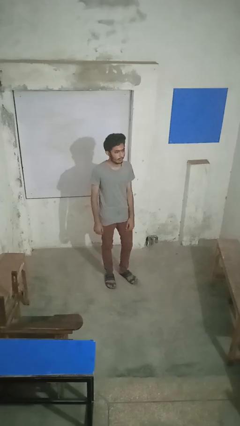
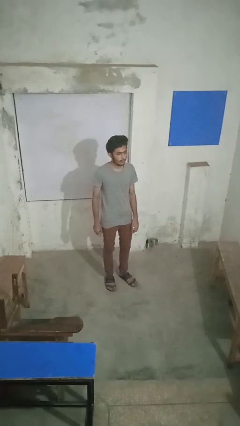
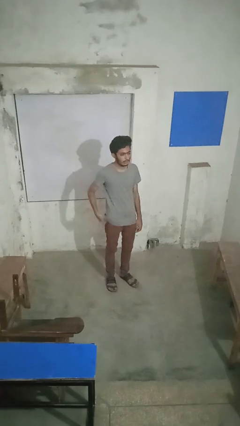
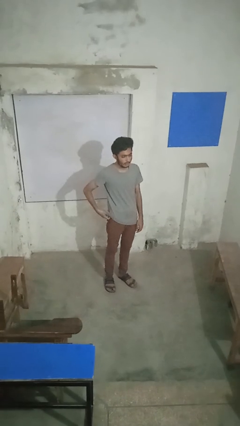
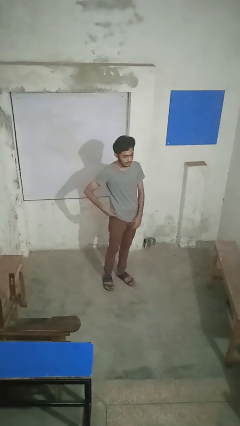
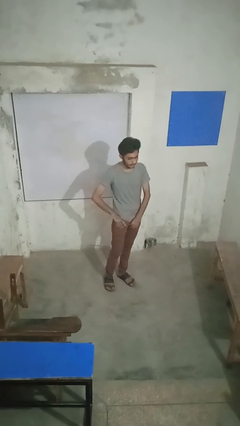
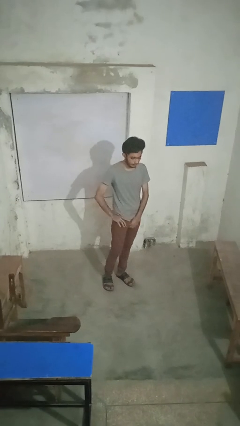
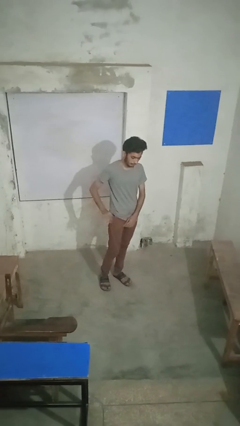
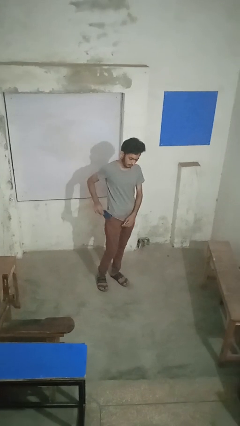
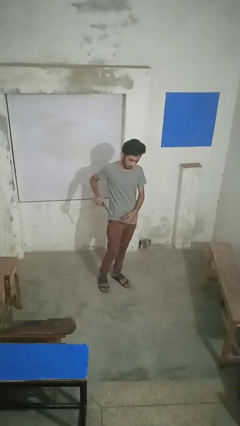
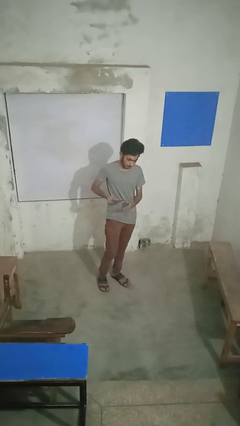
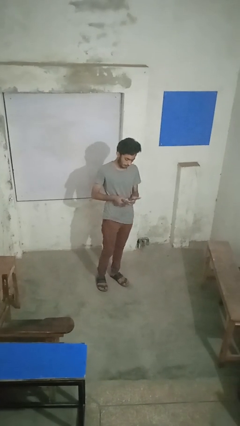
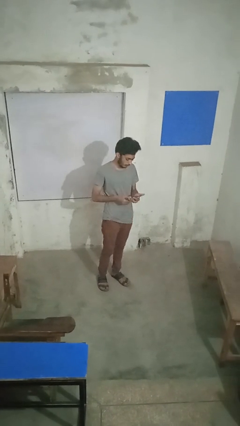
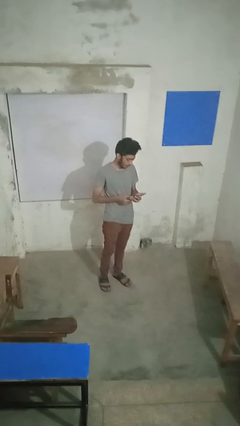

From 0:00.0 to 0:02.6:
person takes phone from pocket

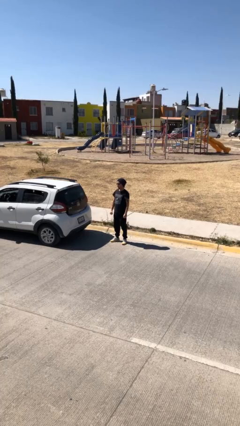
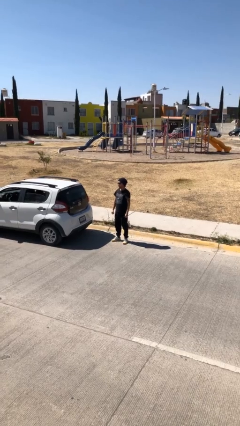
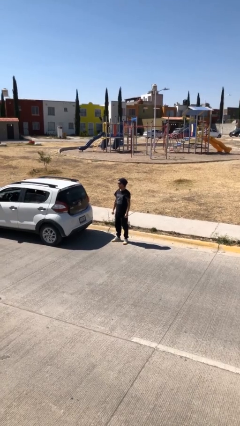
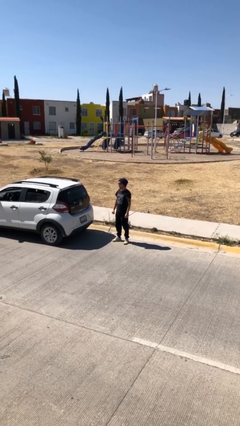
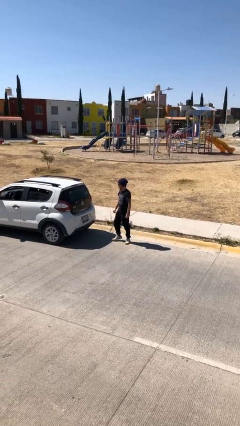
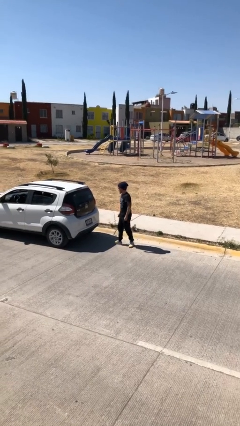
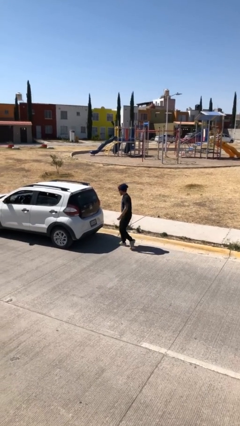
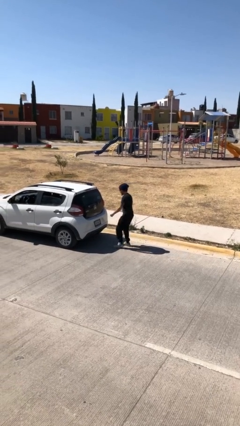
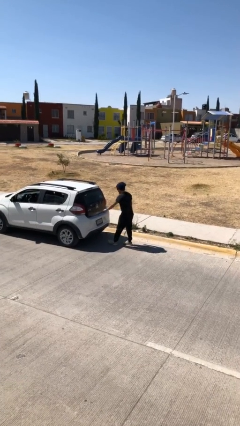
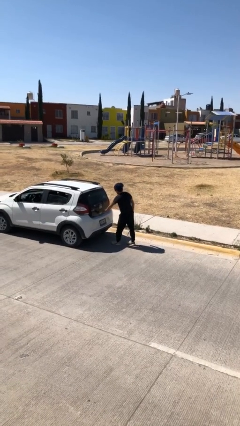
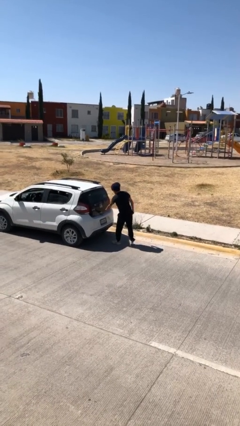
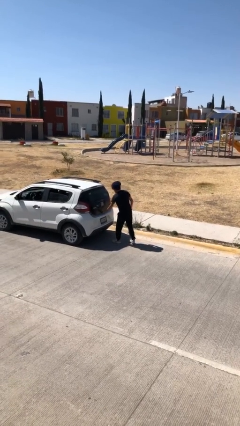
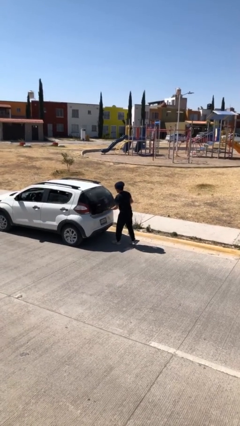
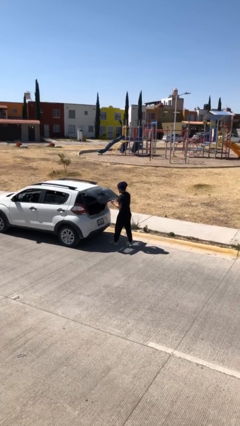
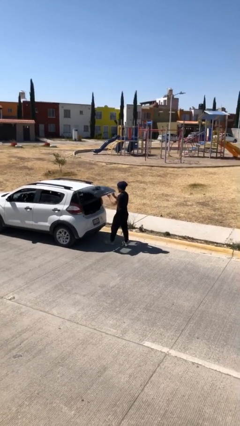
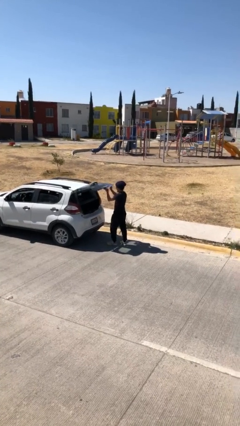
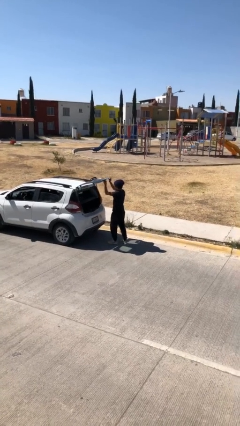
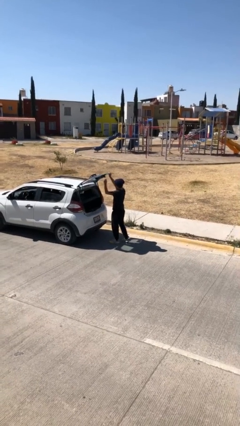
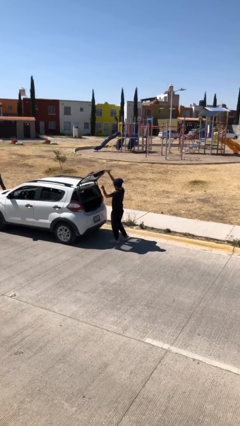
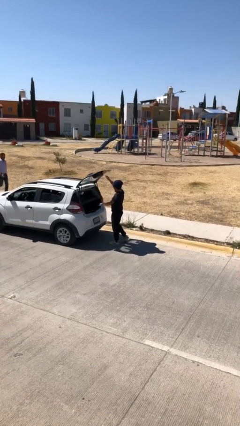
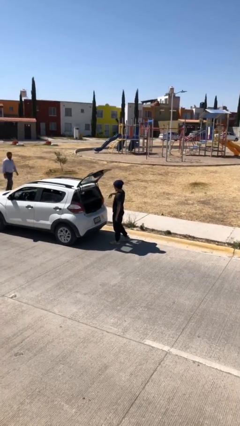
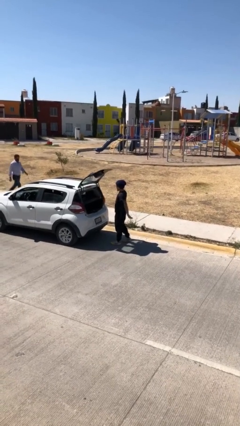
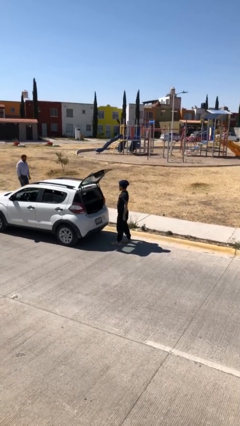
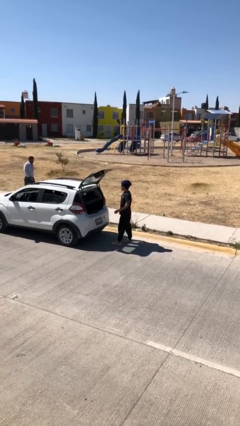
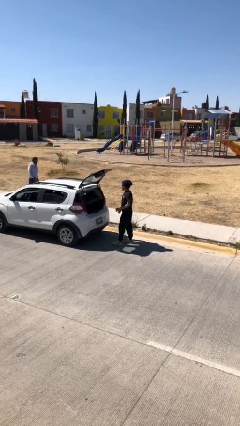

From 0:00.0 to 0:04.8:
person opens car trunk

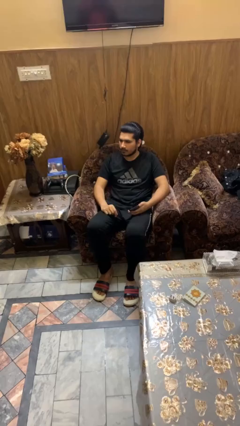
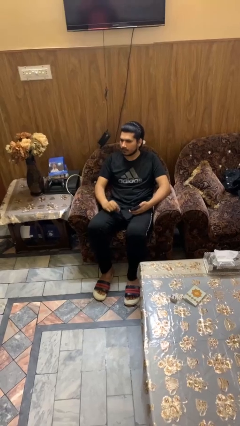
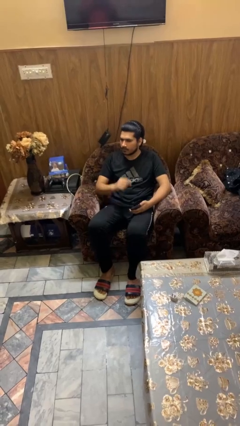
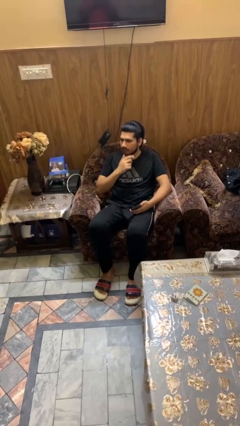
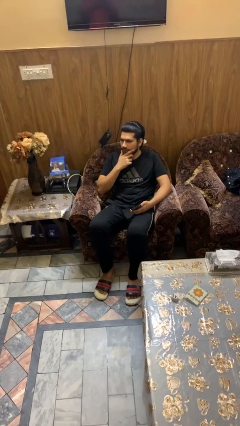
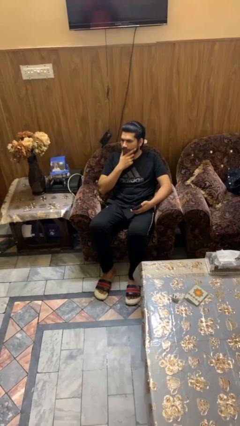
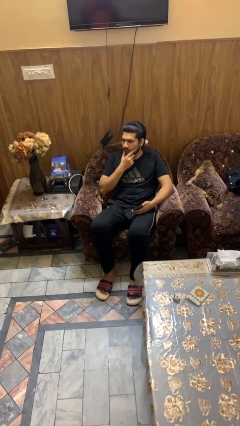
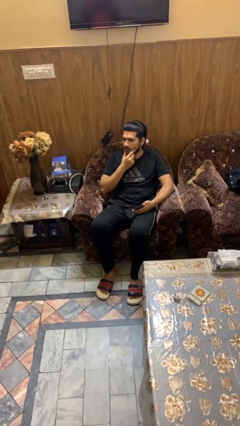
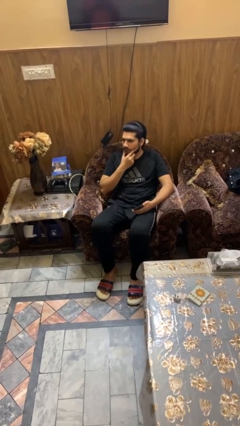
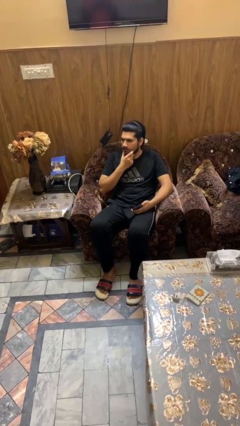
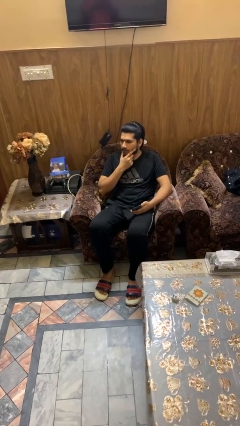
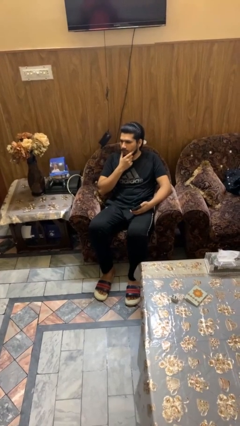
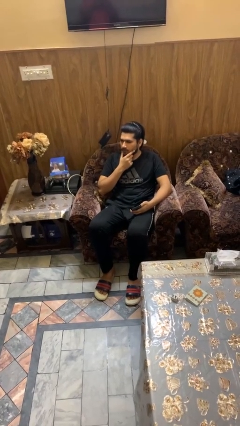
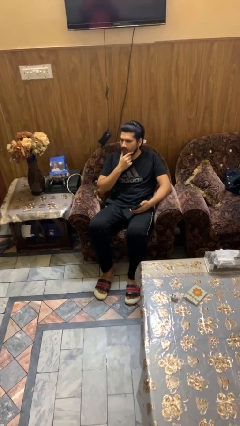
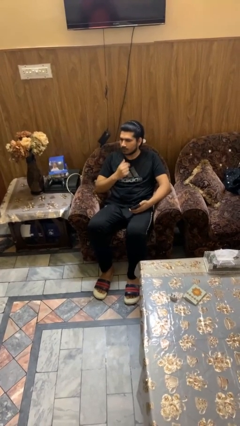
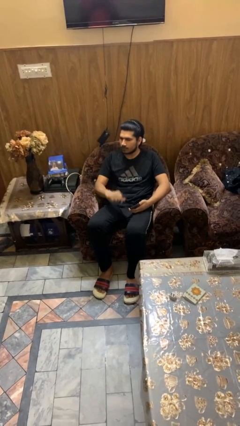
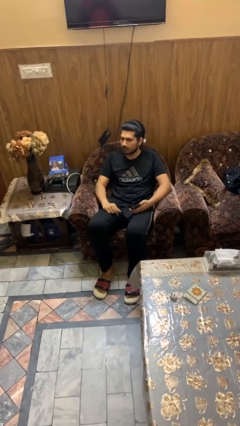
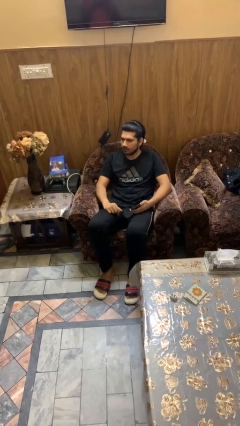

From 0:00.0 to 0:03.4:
person strokes chin

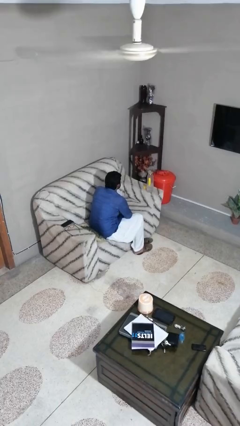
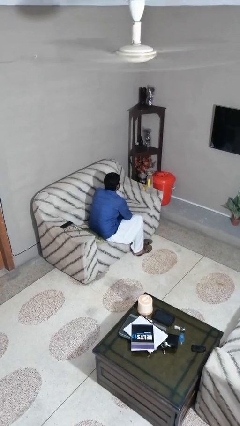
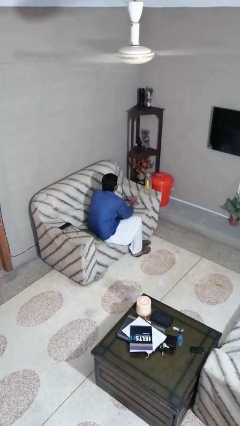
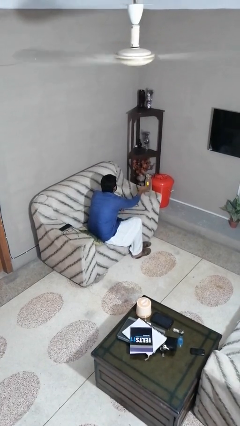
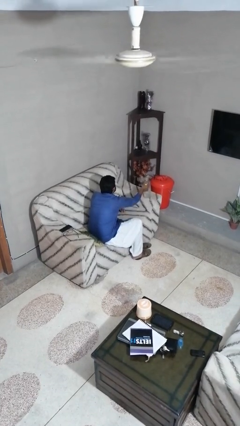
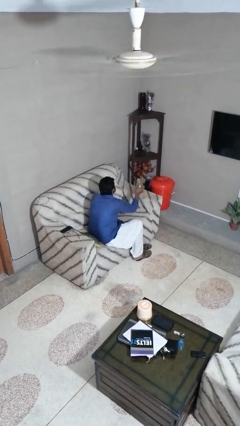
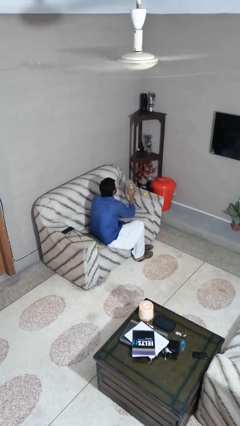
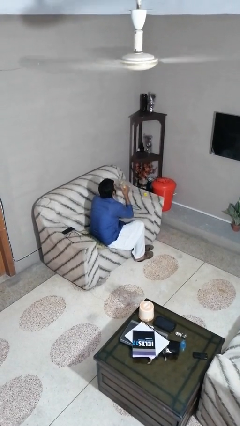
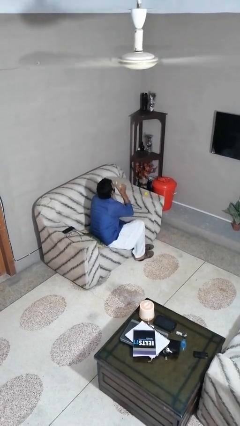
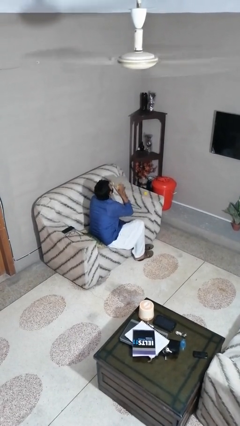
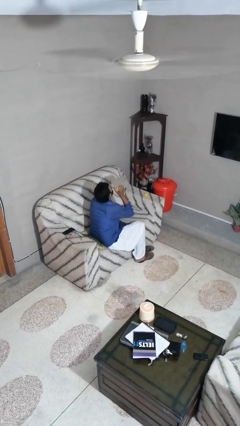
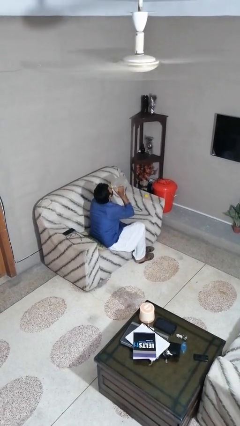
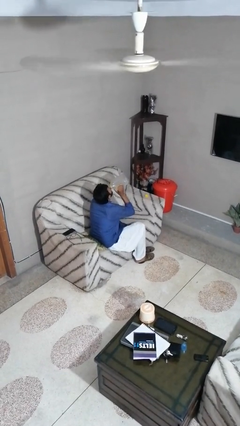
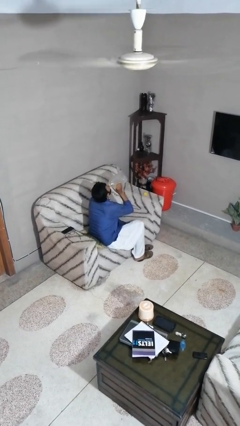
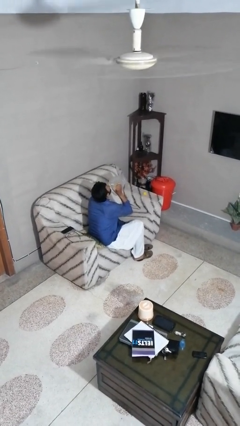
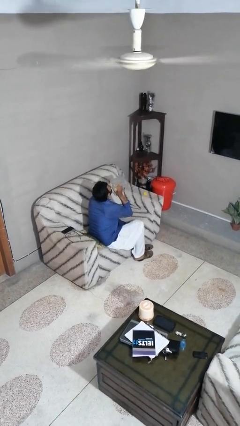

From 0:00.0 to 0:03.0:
person drinks from bottle

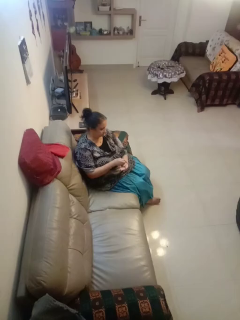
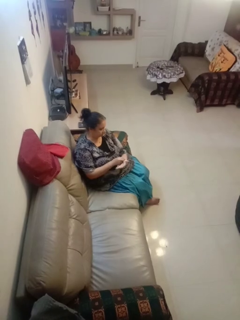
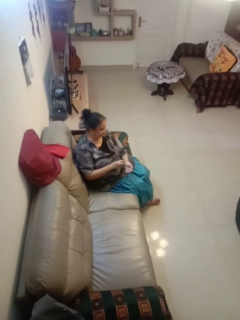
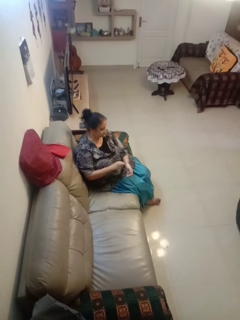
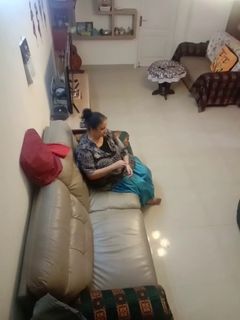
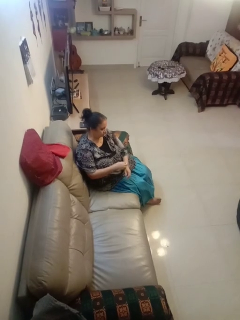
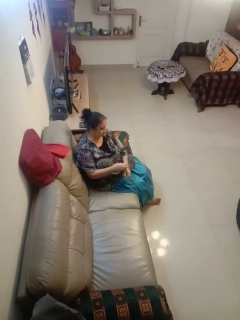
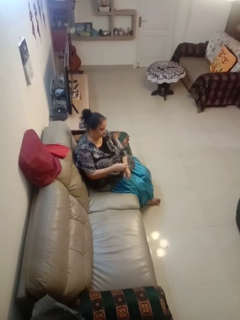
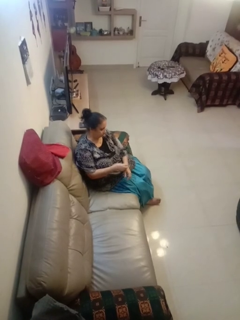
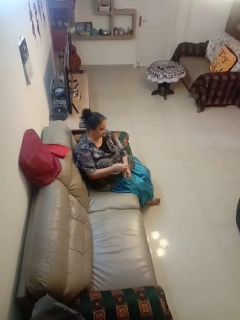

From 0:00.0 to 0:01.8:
person puts on wristwatch

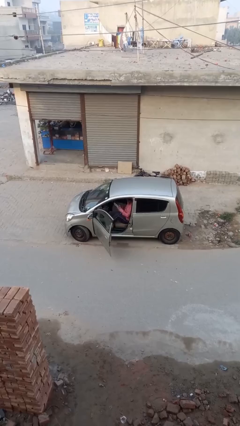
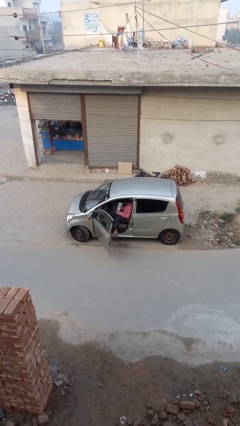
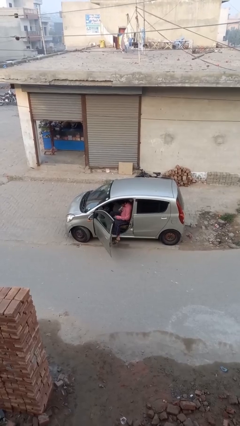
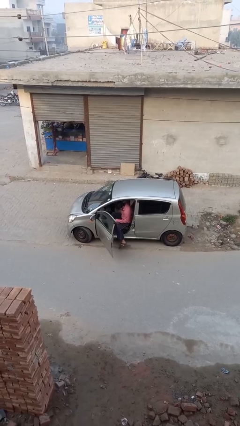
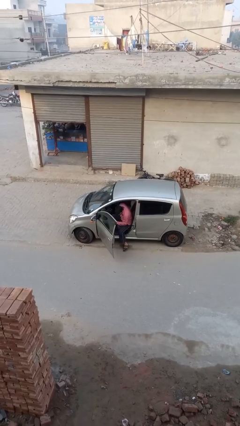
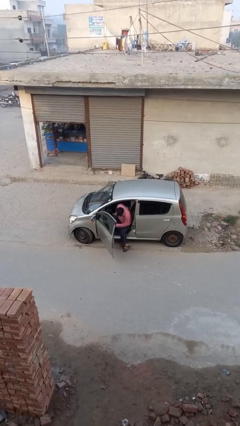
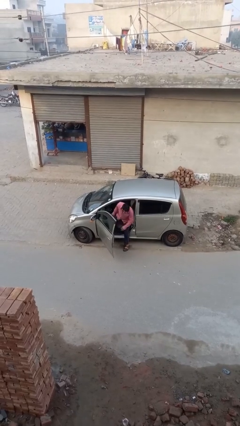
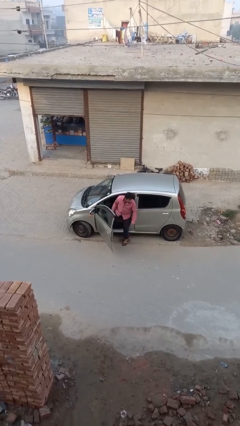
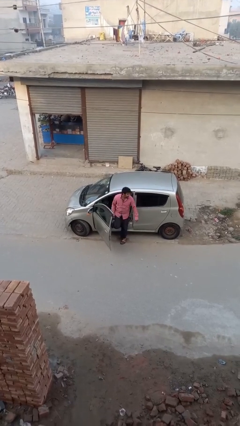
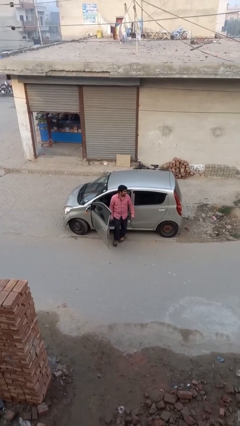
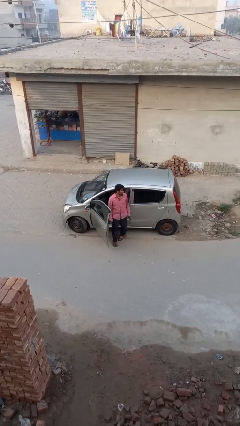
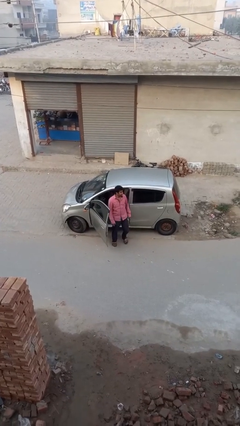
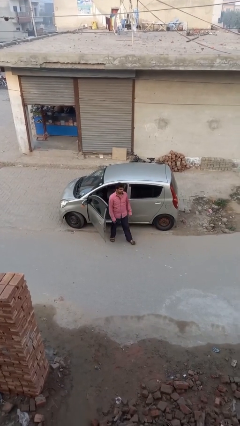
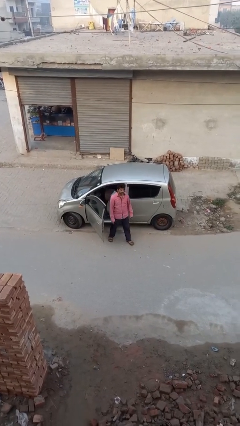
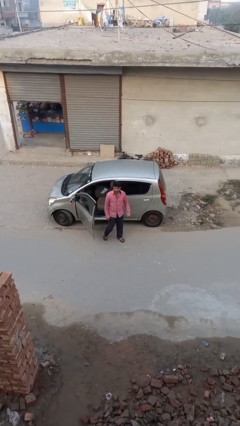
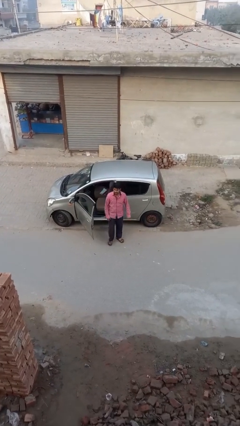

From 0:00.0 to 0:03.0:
person exits car
